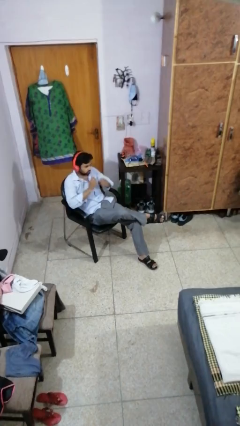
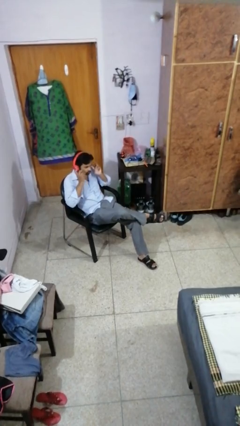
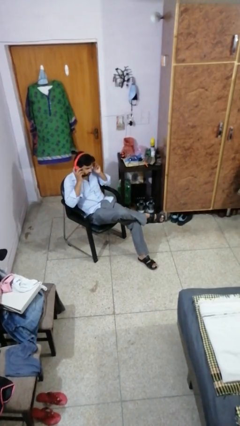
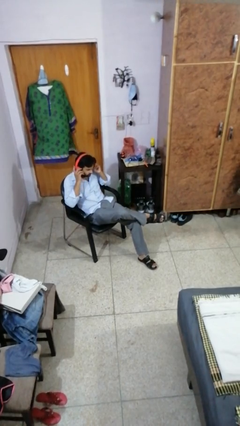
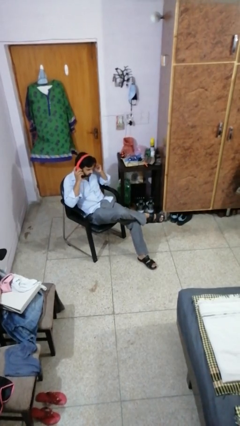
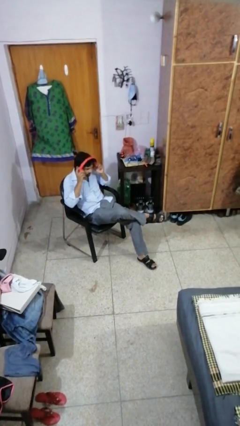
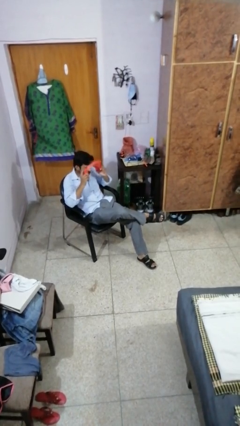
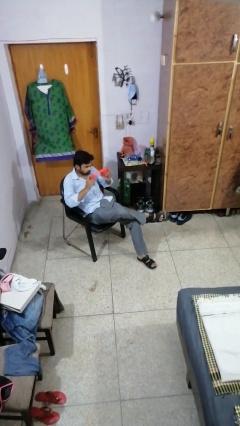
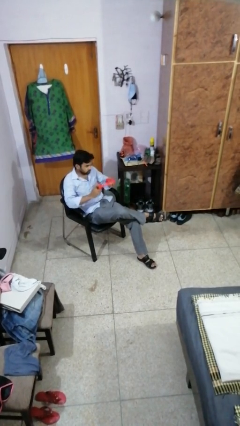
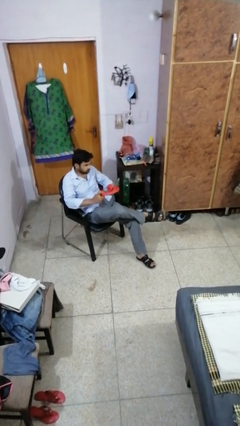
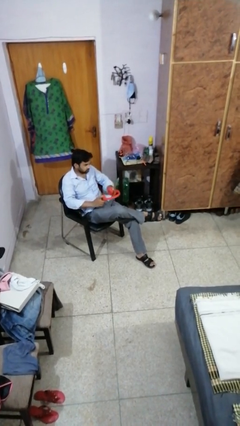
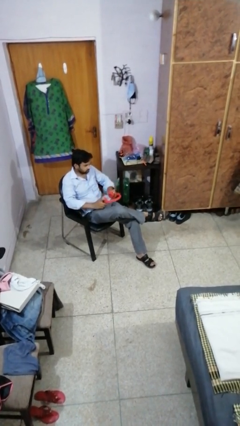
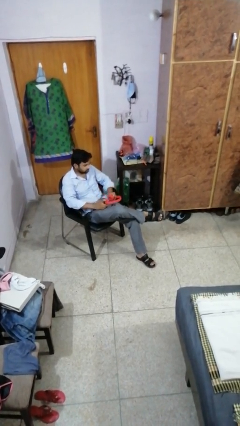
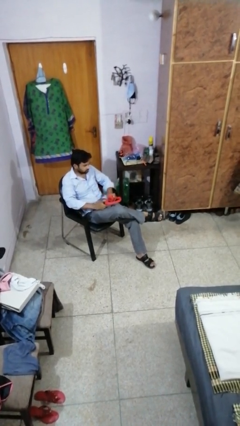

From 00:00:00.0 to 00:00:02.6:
person takes off headphones

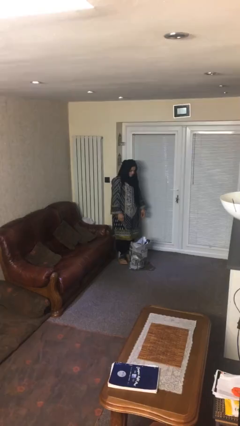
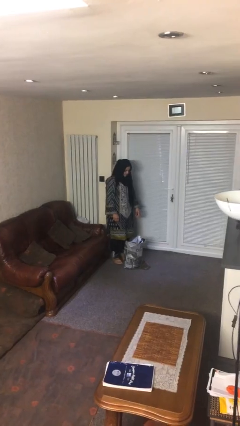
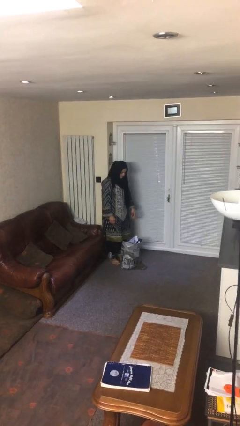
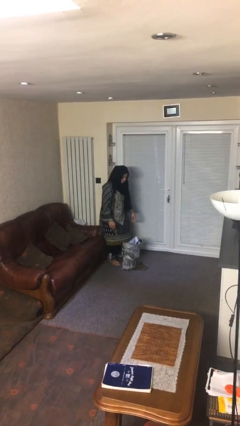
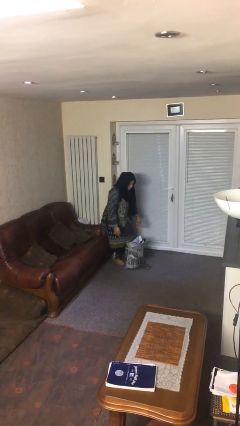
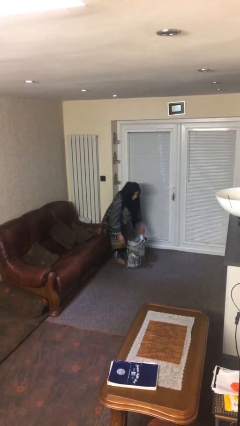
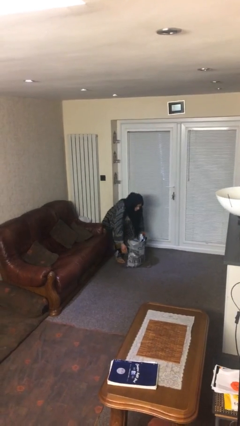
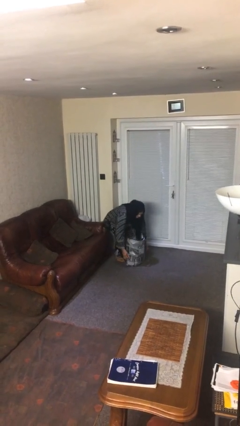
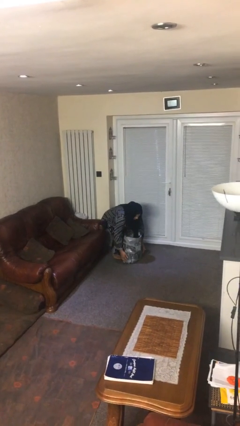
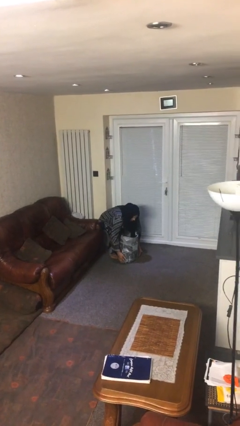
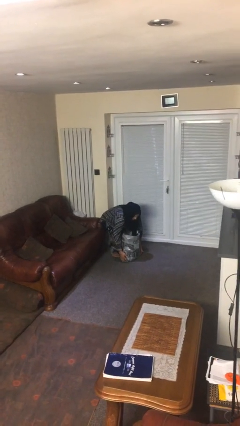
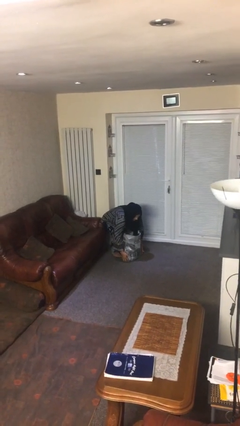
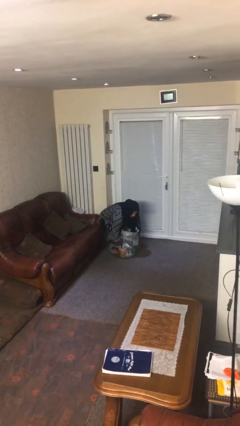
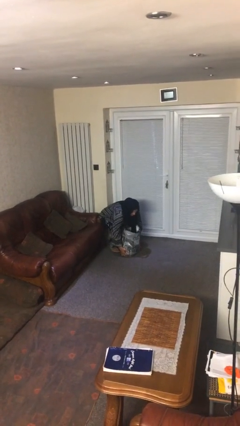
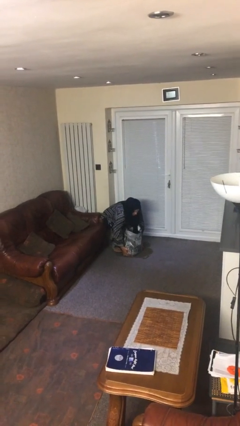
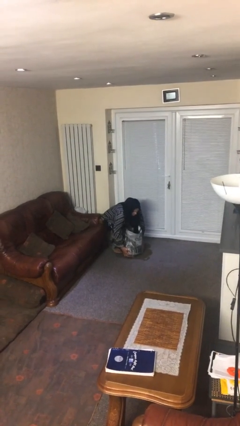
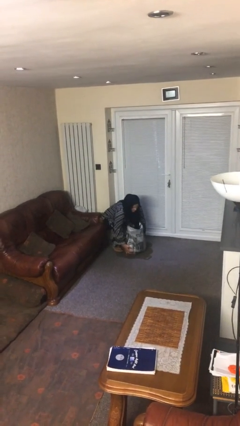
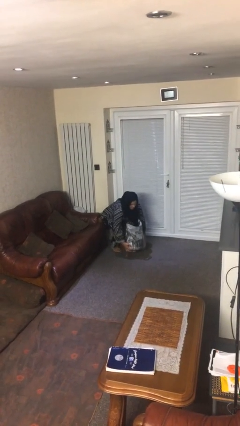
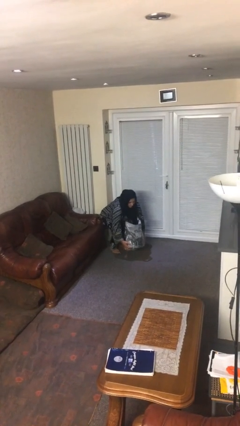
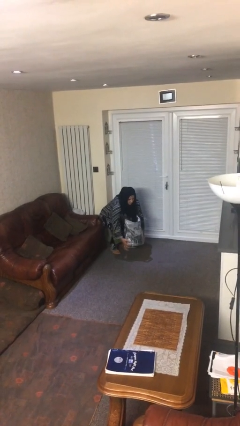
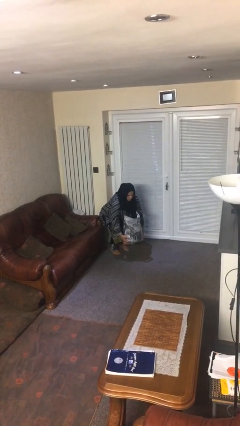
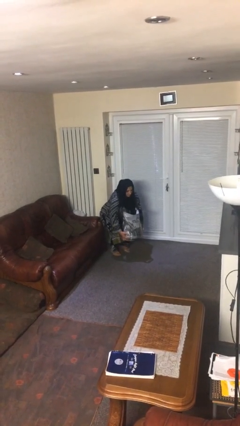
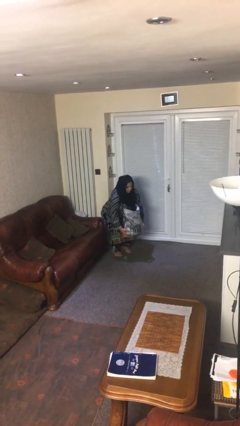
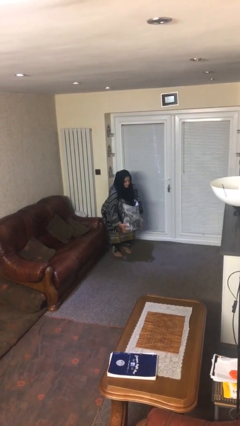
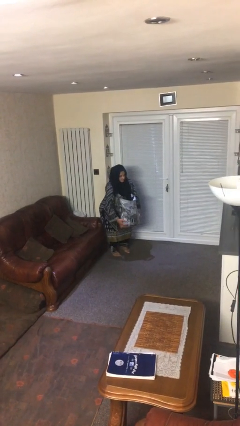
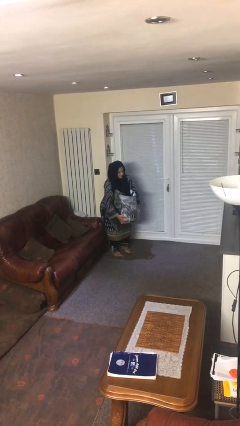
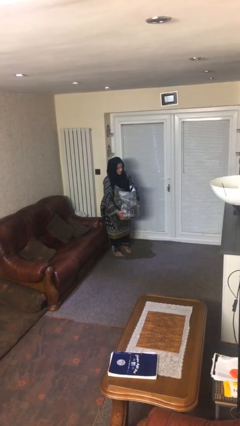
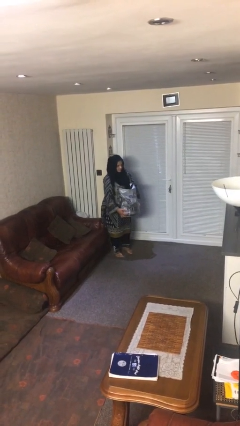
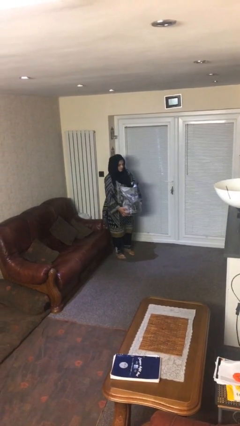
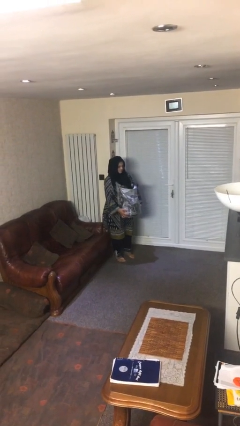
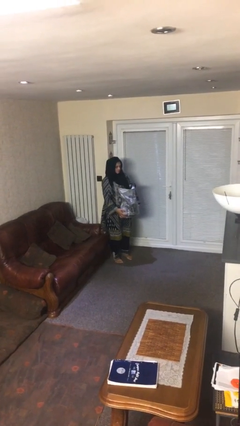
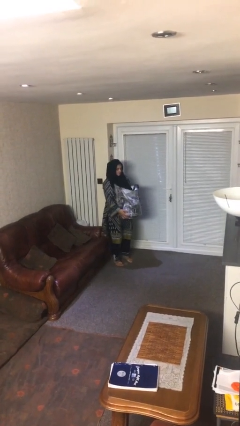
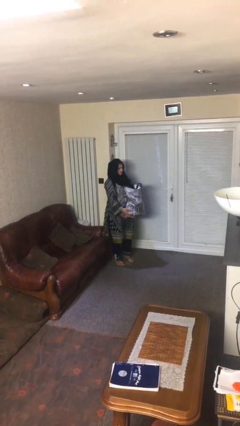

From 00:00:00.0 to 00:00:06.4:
person picks up object from floor

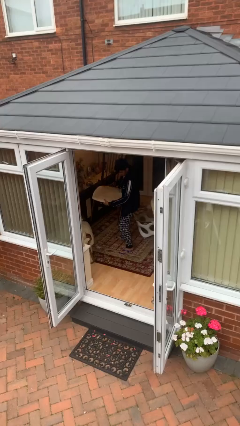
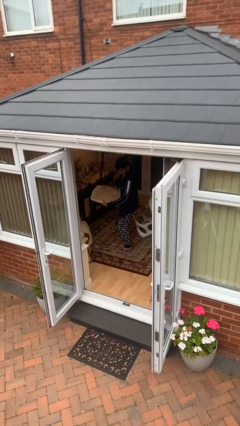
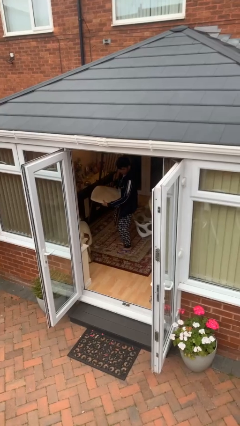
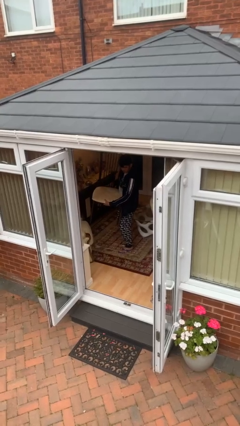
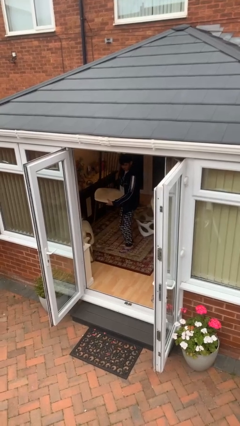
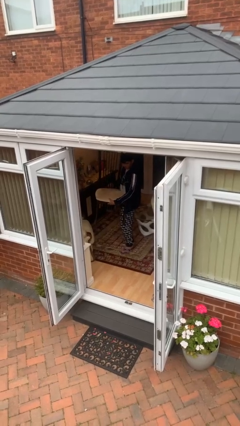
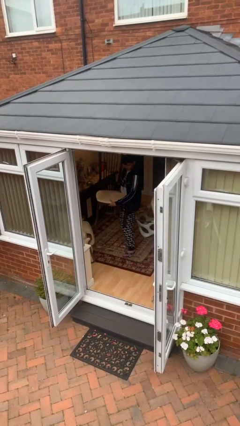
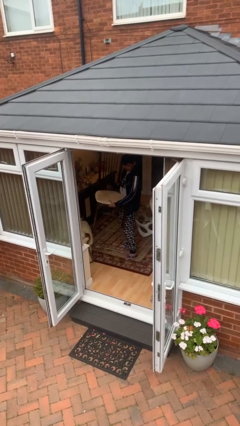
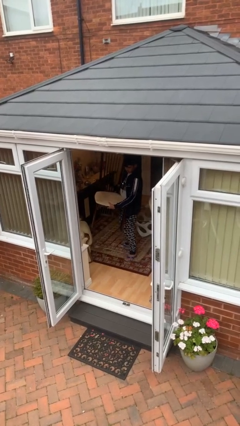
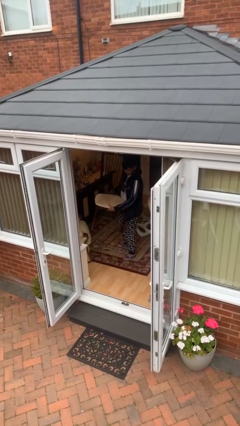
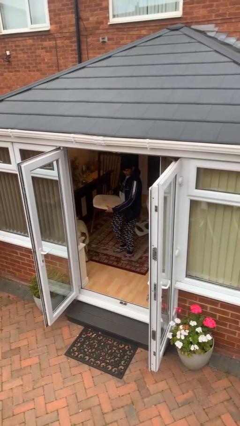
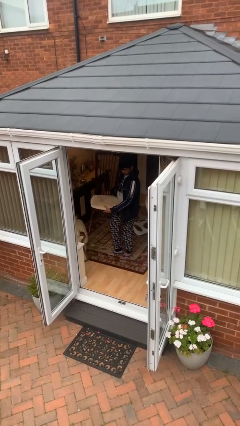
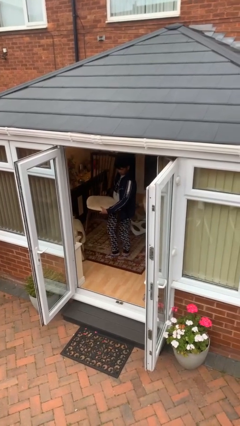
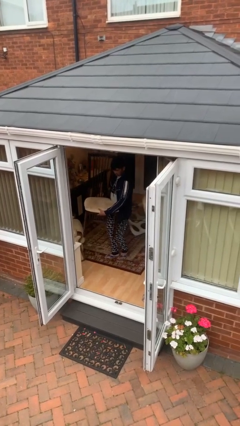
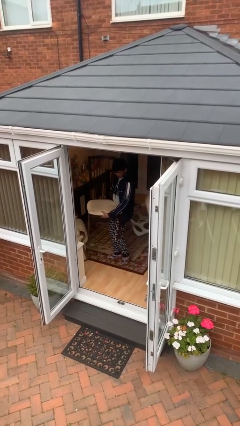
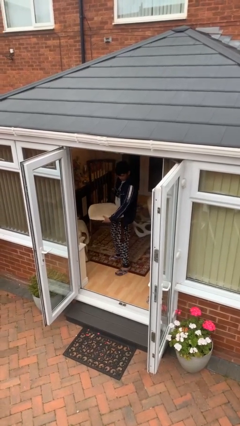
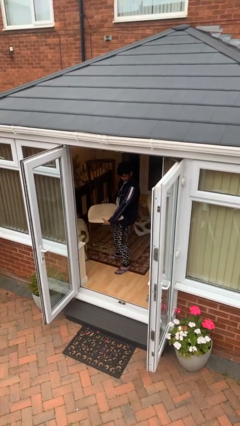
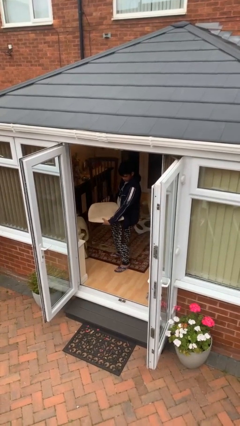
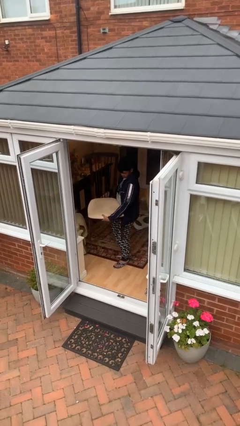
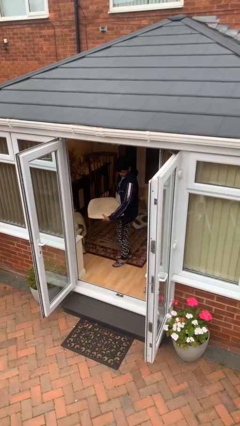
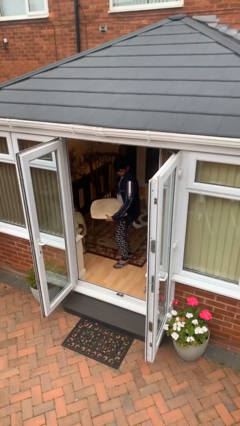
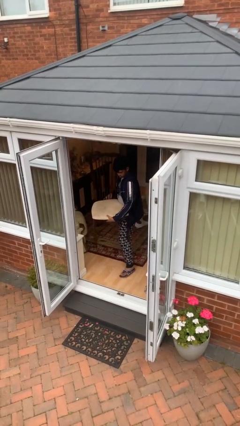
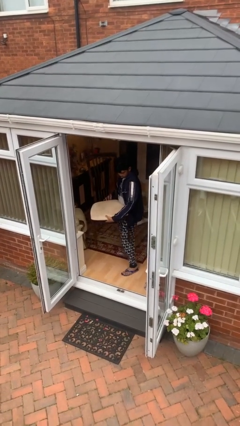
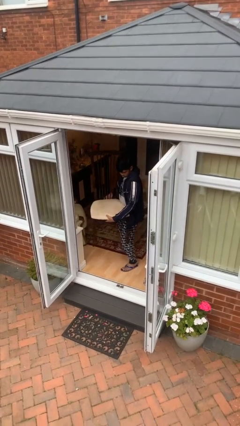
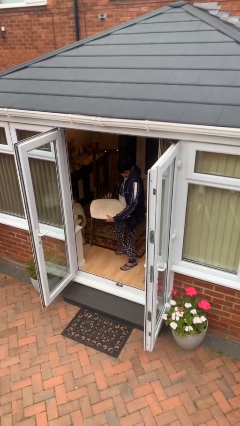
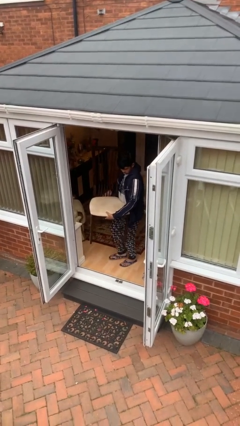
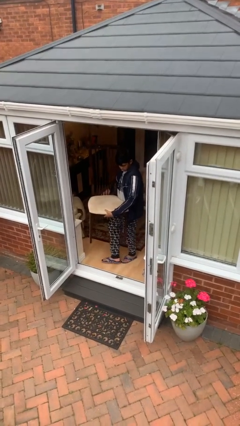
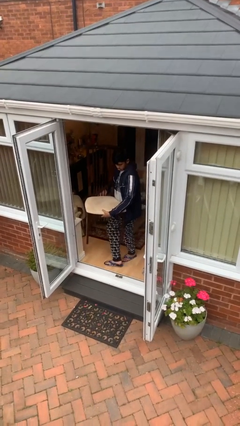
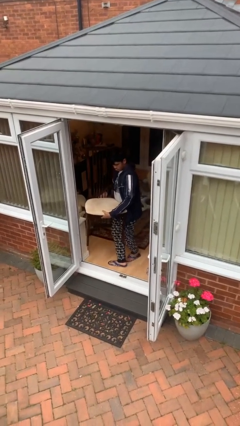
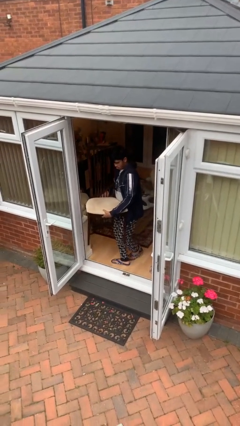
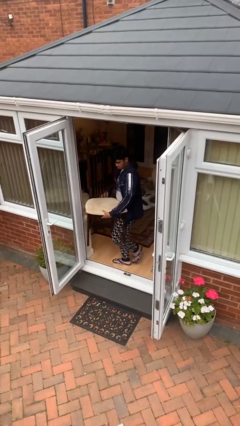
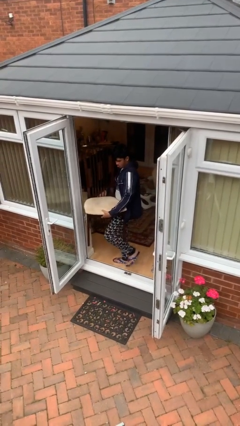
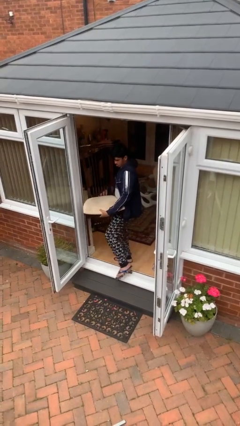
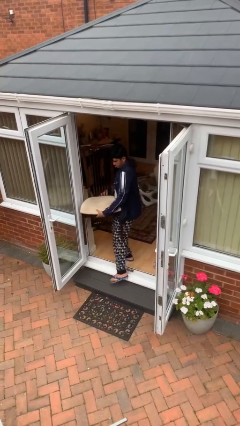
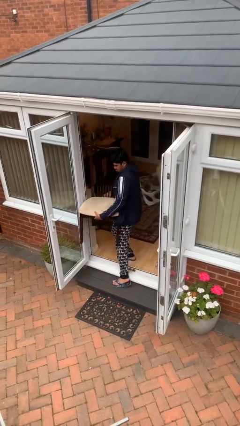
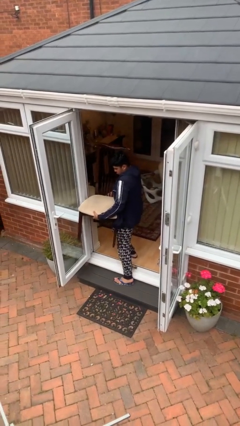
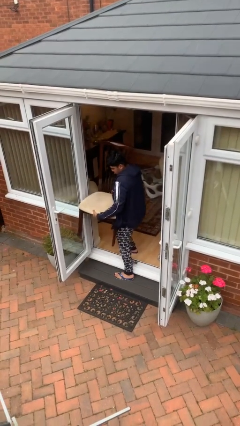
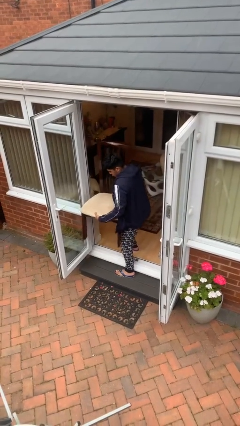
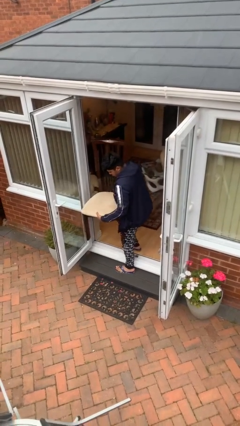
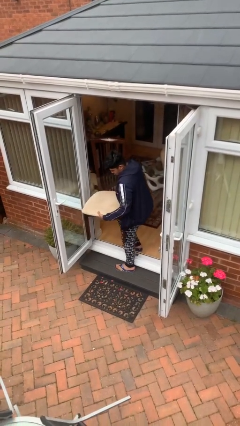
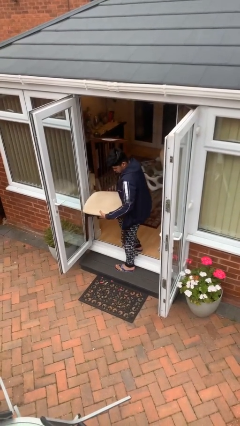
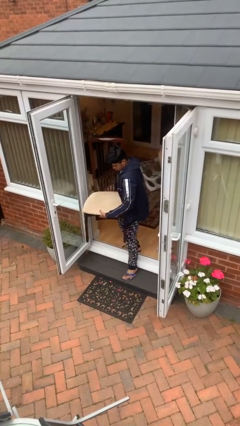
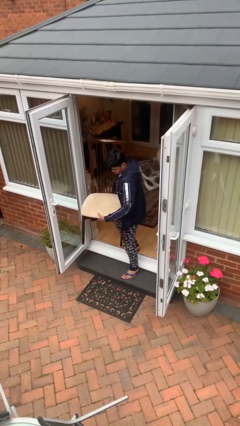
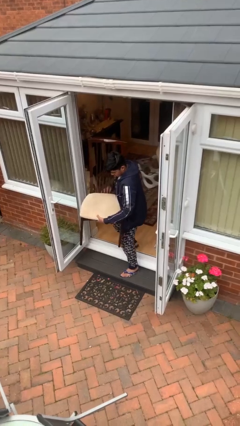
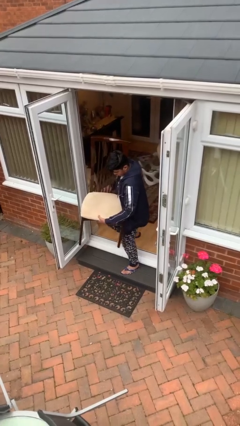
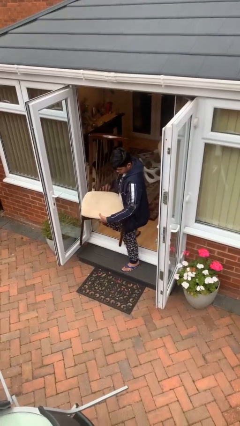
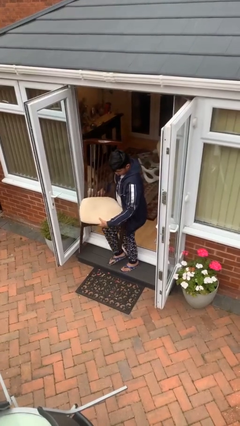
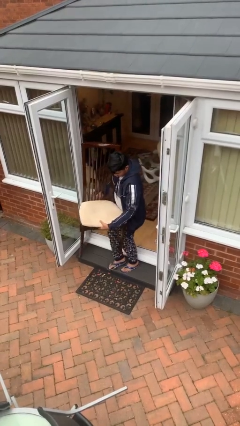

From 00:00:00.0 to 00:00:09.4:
person carries heavy object
